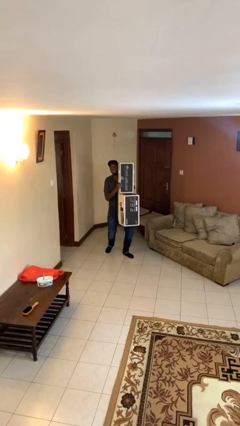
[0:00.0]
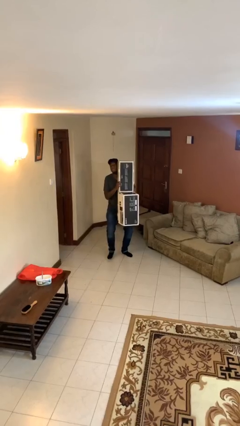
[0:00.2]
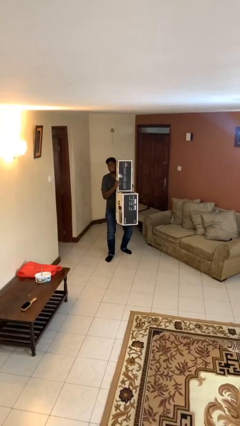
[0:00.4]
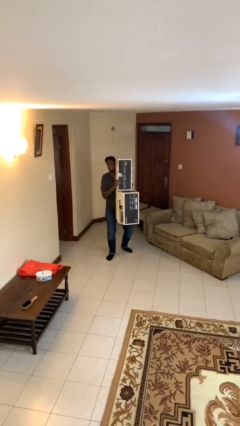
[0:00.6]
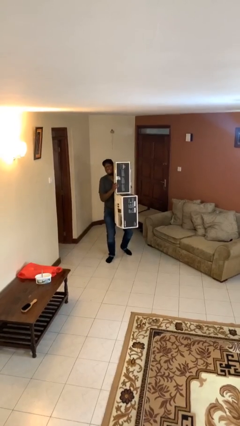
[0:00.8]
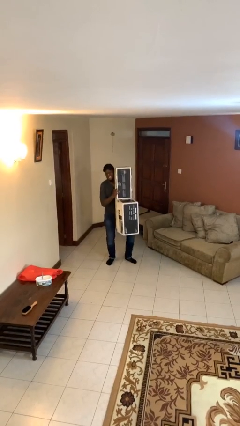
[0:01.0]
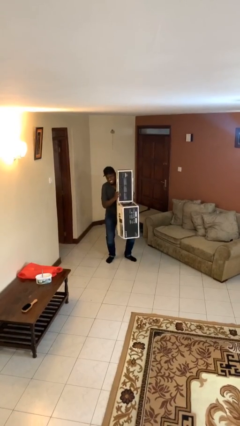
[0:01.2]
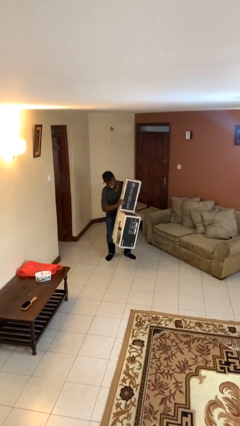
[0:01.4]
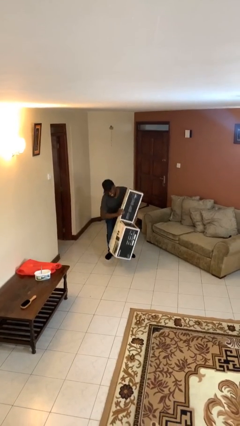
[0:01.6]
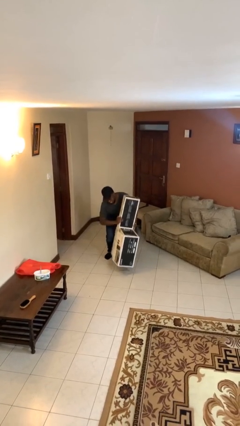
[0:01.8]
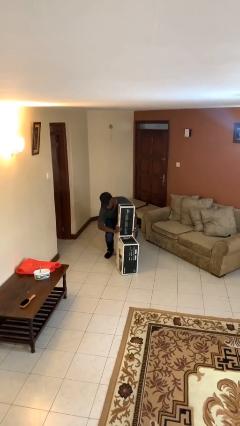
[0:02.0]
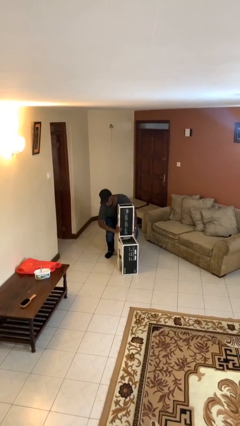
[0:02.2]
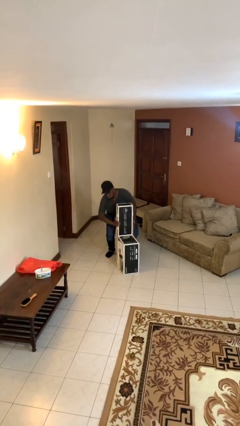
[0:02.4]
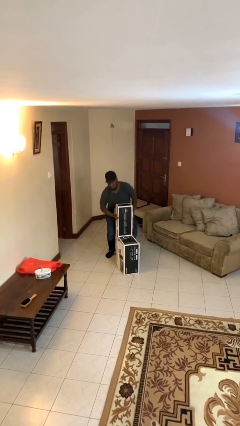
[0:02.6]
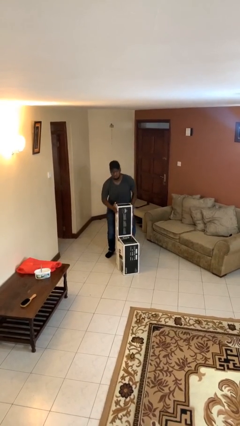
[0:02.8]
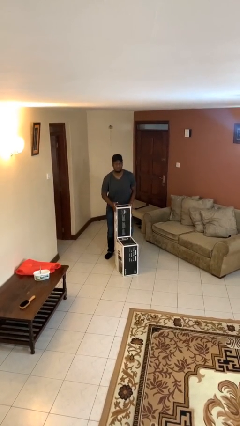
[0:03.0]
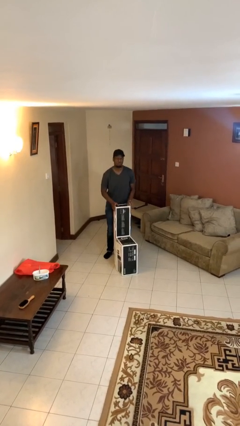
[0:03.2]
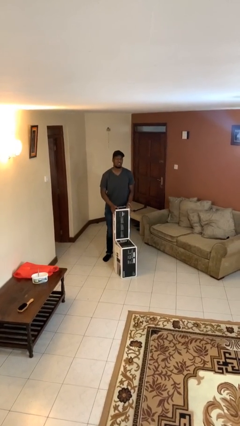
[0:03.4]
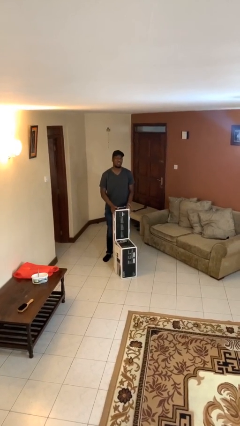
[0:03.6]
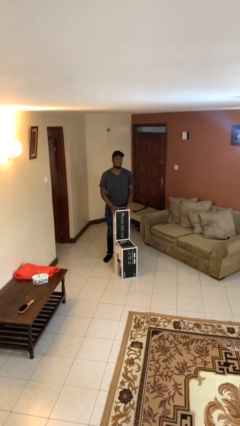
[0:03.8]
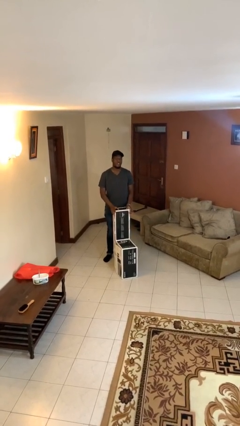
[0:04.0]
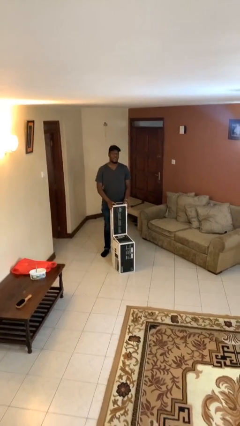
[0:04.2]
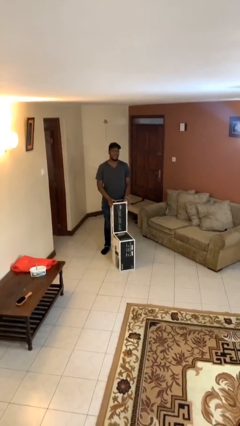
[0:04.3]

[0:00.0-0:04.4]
person puts down object on floor

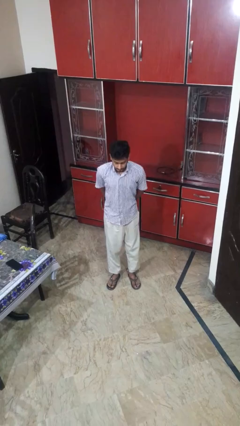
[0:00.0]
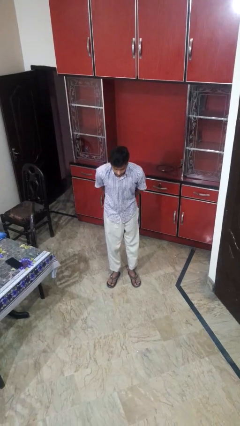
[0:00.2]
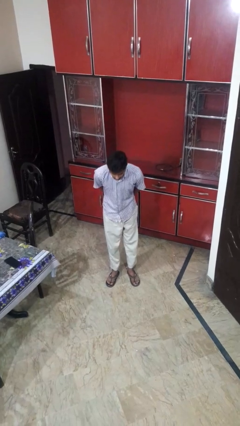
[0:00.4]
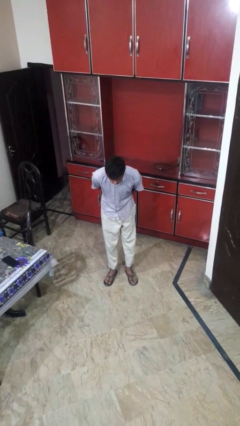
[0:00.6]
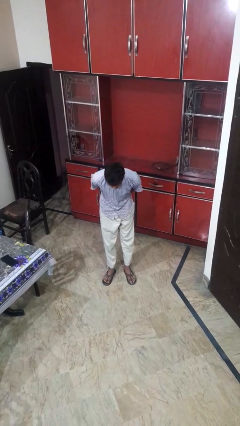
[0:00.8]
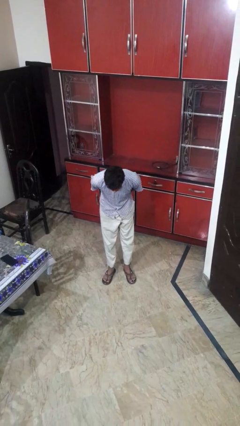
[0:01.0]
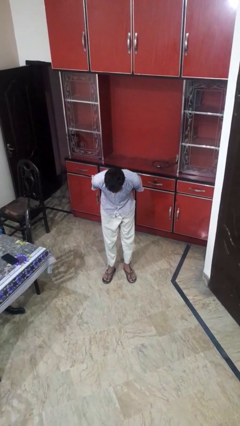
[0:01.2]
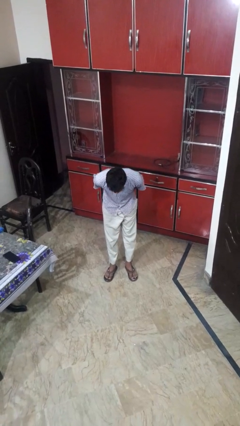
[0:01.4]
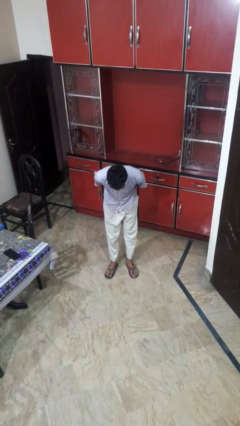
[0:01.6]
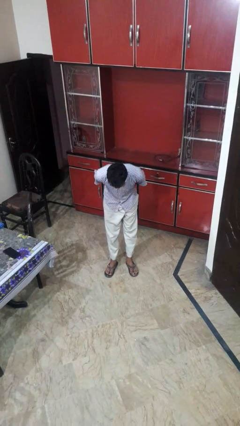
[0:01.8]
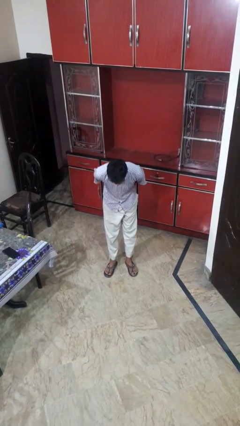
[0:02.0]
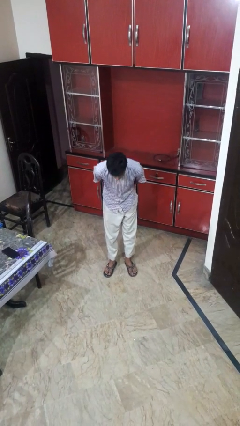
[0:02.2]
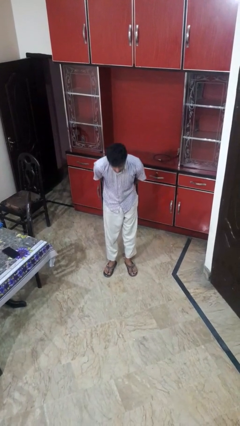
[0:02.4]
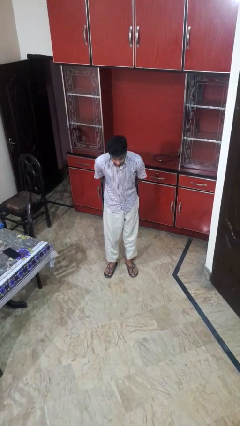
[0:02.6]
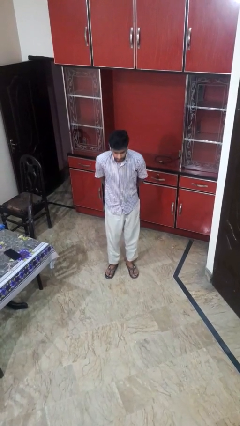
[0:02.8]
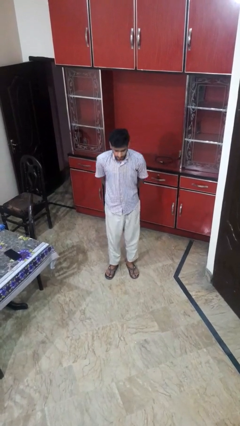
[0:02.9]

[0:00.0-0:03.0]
person bows

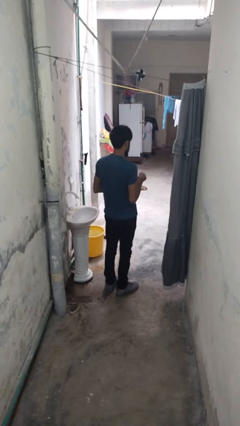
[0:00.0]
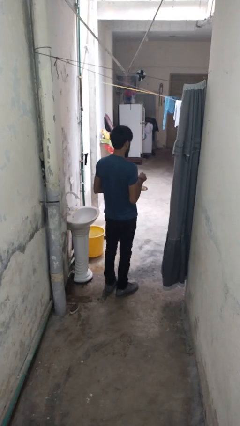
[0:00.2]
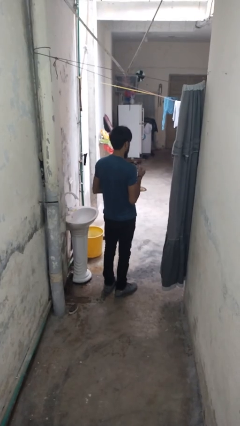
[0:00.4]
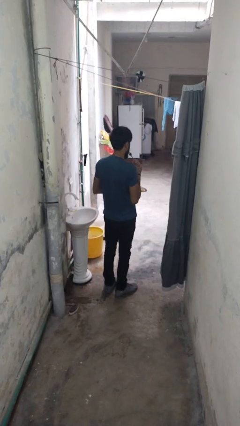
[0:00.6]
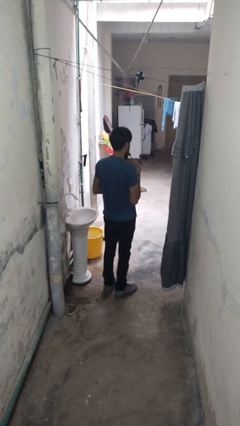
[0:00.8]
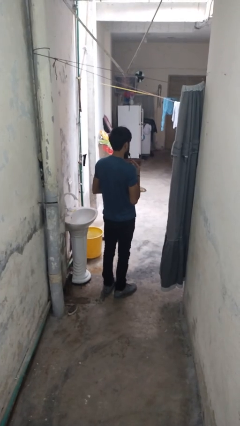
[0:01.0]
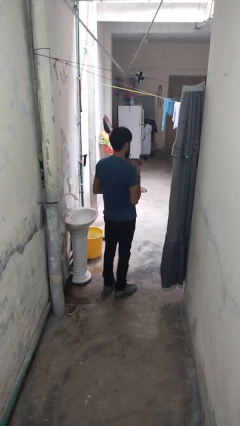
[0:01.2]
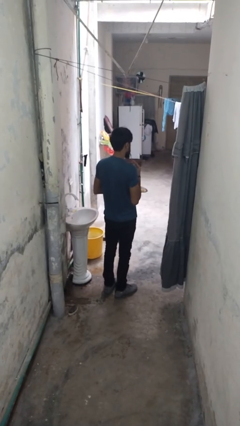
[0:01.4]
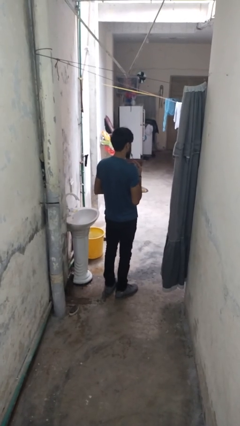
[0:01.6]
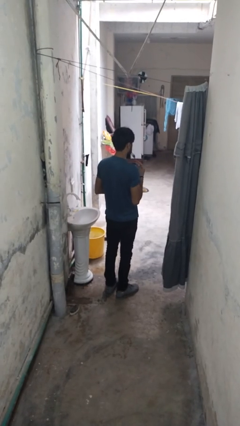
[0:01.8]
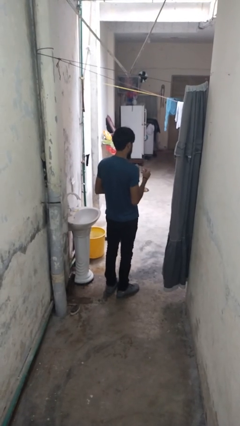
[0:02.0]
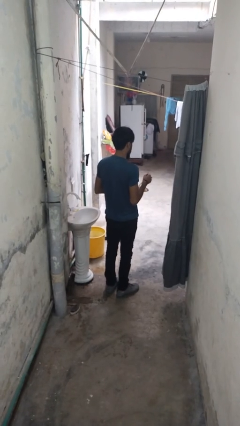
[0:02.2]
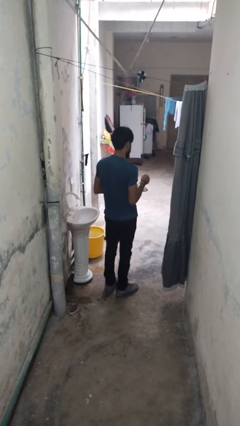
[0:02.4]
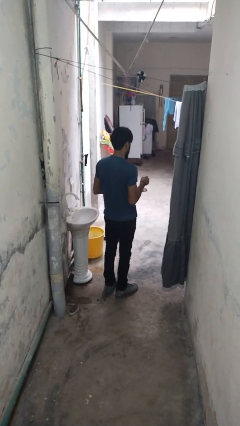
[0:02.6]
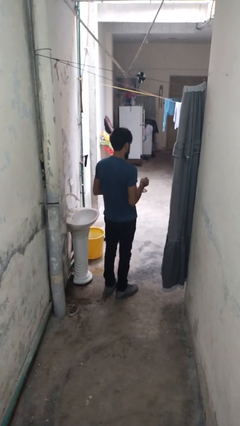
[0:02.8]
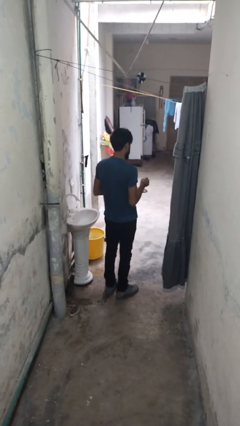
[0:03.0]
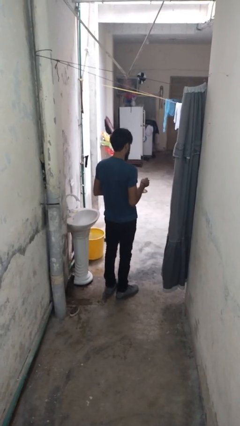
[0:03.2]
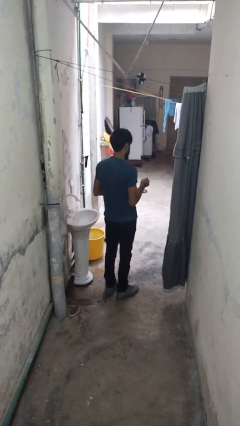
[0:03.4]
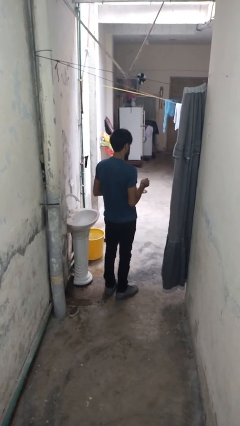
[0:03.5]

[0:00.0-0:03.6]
person eats with utensil

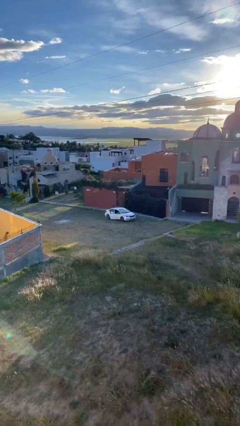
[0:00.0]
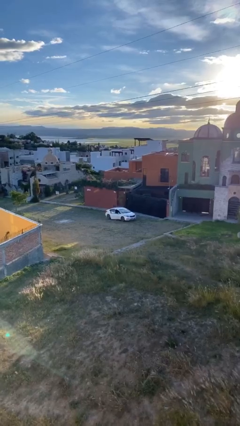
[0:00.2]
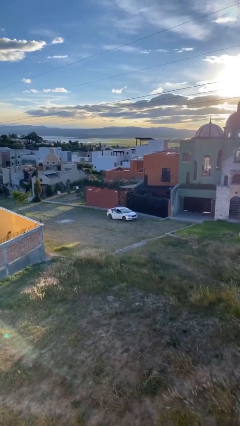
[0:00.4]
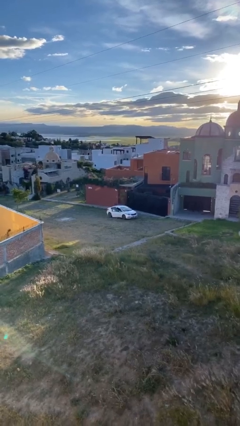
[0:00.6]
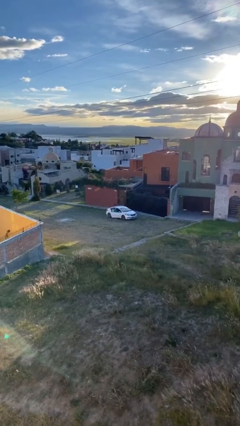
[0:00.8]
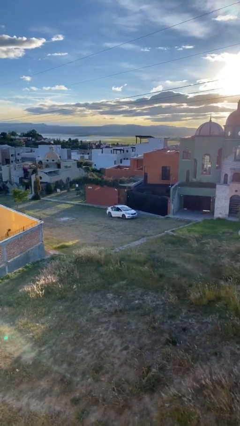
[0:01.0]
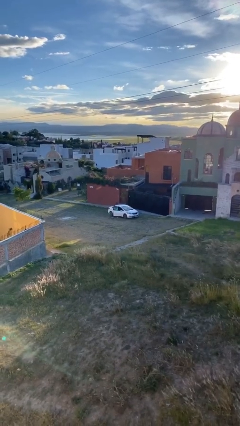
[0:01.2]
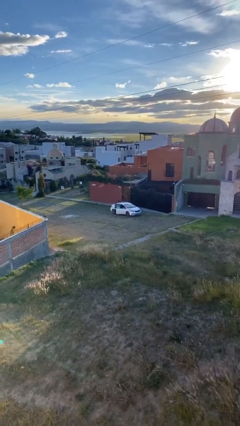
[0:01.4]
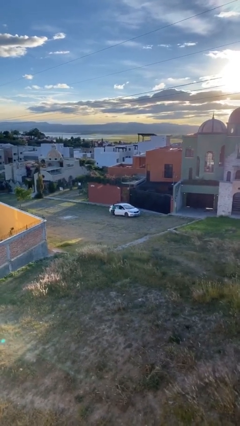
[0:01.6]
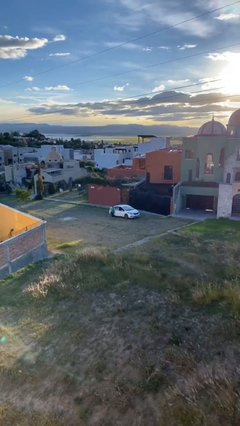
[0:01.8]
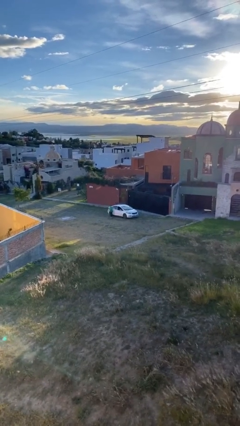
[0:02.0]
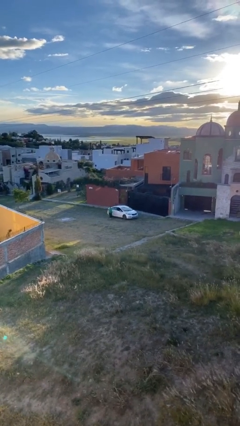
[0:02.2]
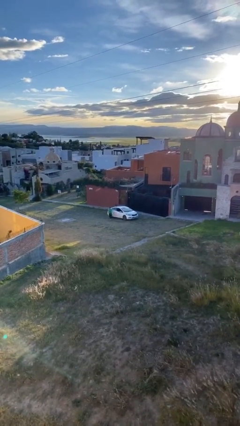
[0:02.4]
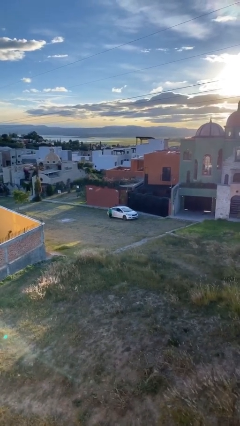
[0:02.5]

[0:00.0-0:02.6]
car drops off person

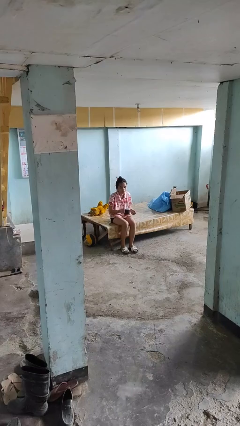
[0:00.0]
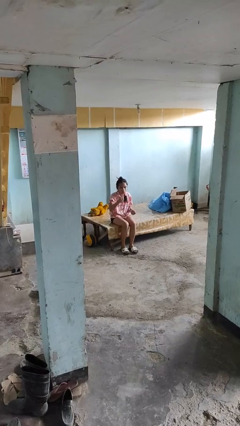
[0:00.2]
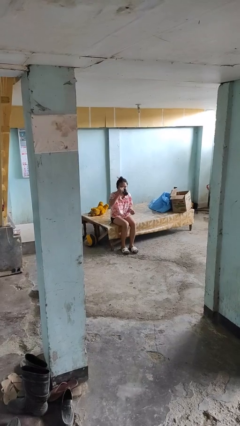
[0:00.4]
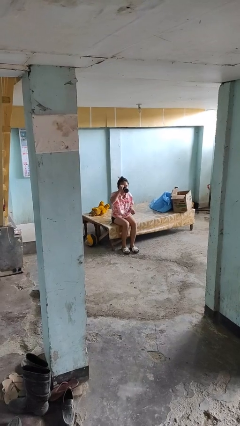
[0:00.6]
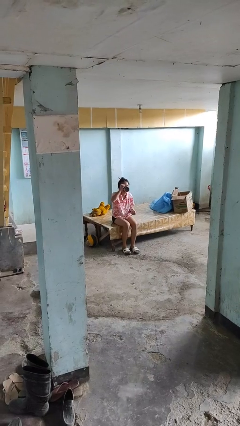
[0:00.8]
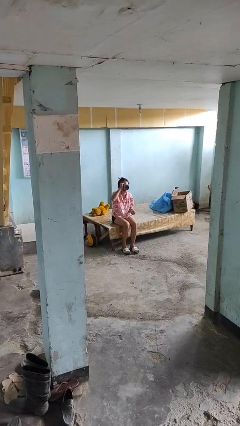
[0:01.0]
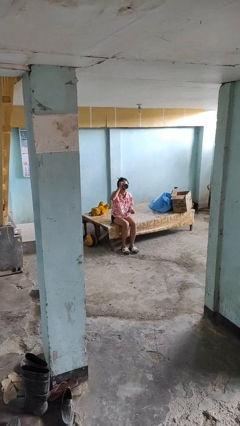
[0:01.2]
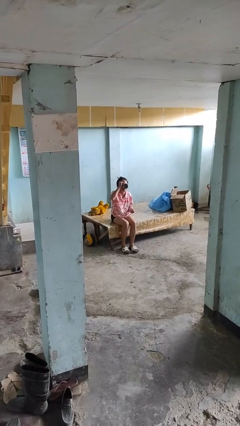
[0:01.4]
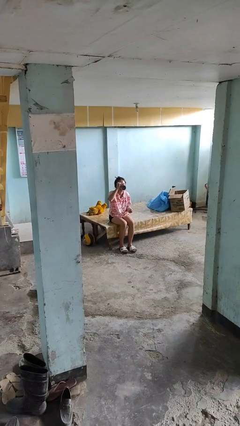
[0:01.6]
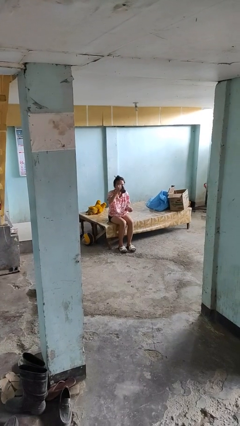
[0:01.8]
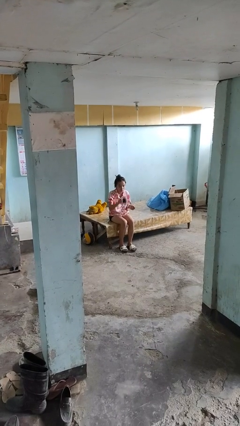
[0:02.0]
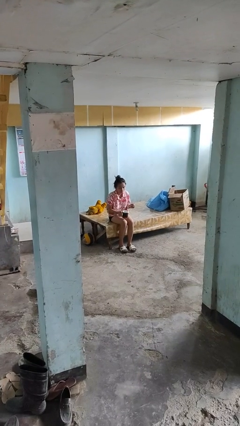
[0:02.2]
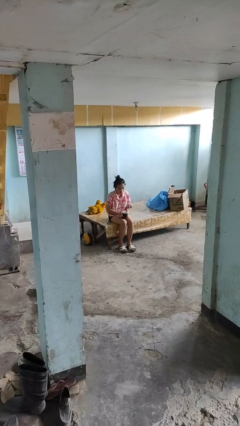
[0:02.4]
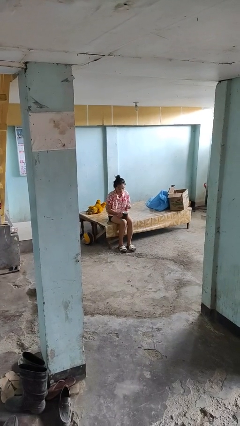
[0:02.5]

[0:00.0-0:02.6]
person drinks from mug

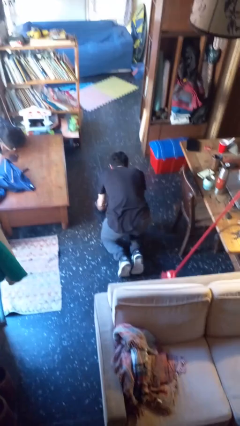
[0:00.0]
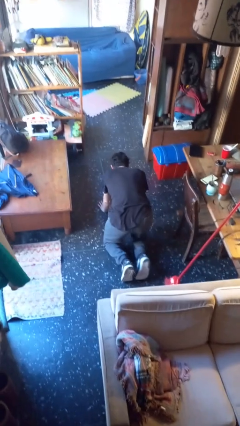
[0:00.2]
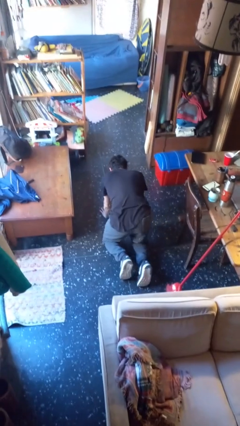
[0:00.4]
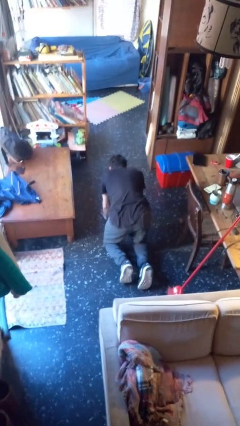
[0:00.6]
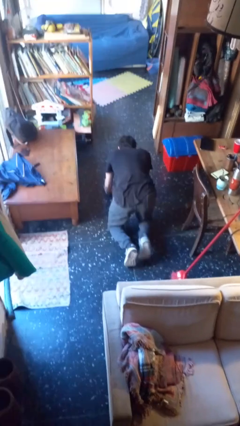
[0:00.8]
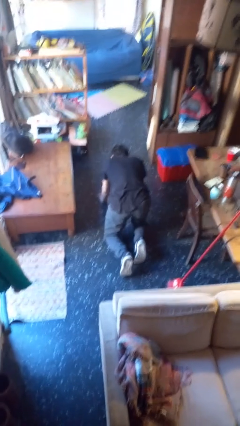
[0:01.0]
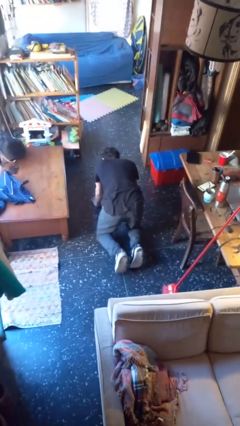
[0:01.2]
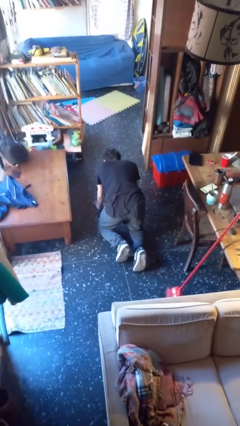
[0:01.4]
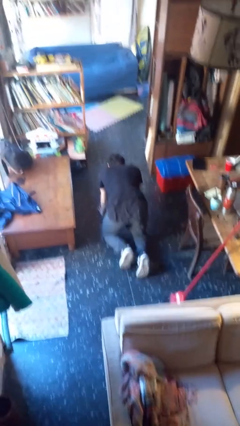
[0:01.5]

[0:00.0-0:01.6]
person crawls
